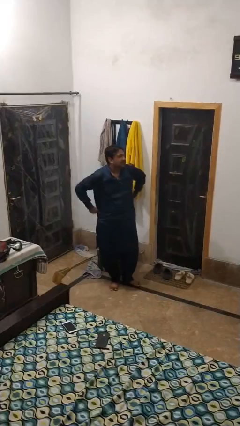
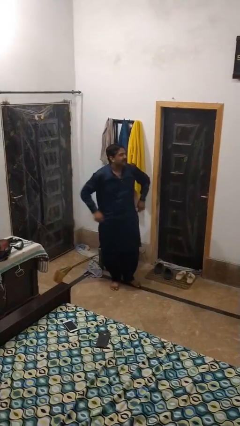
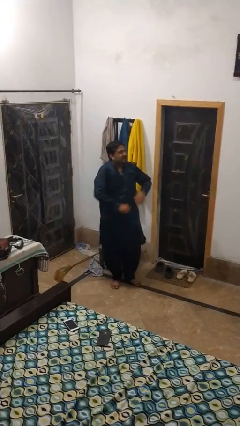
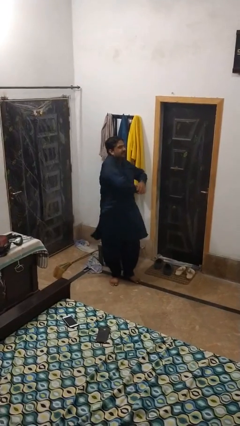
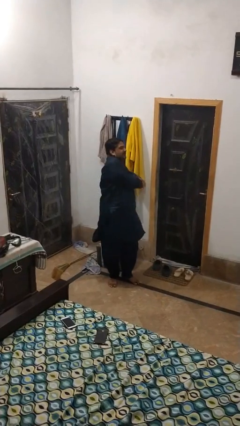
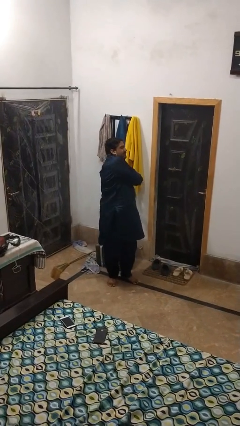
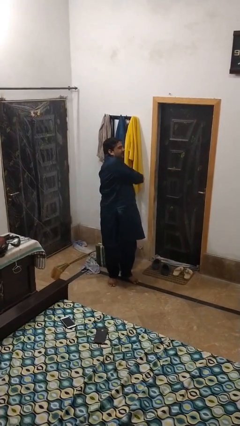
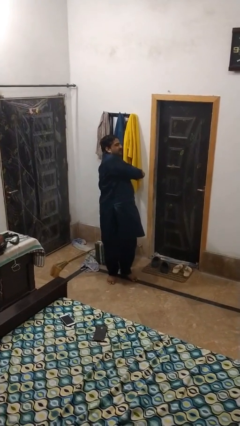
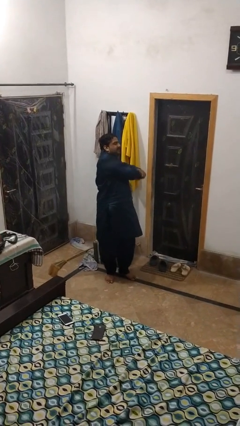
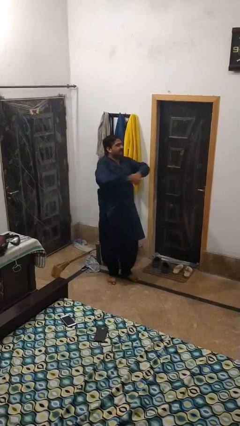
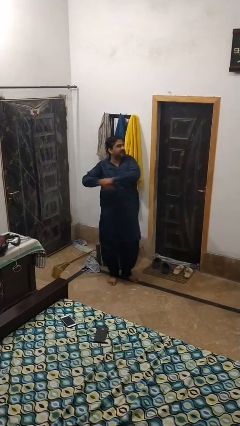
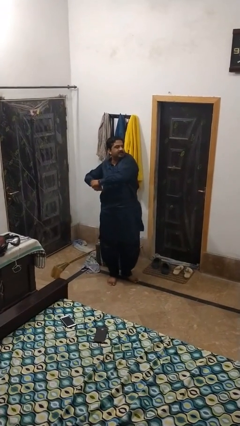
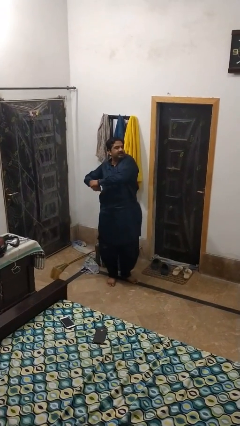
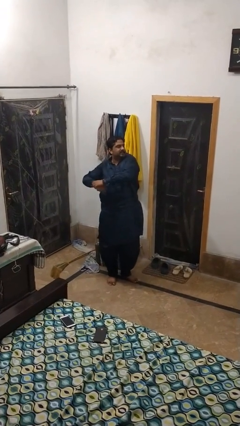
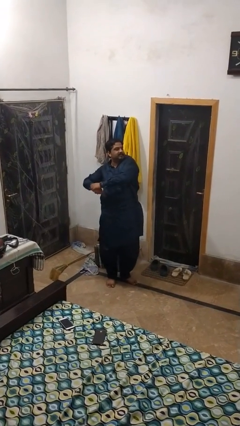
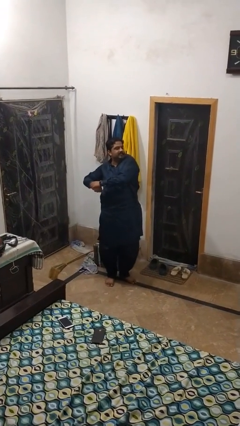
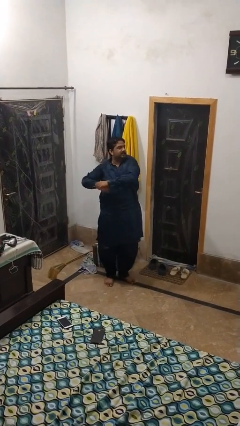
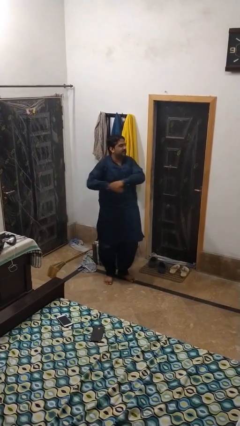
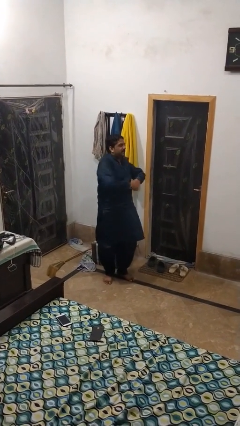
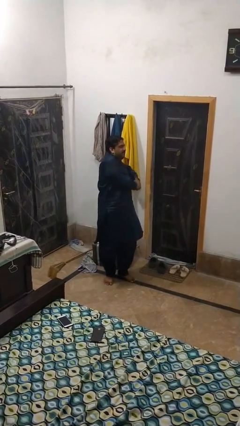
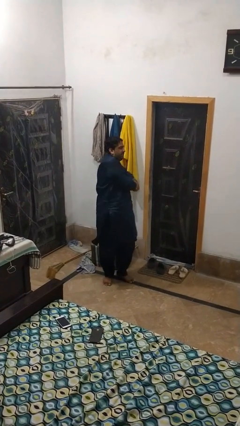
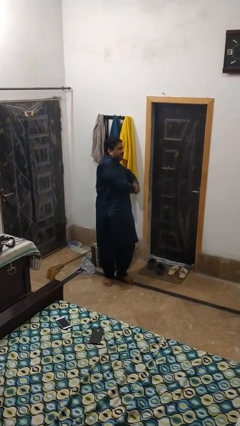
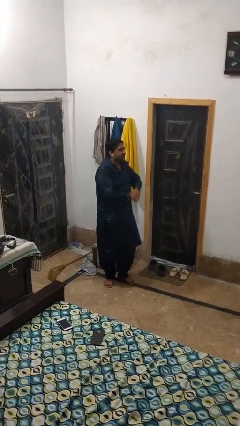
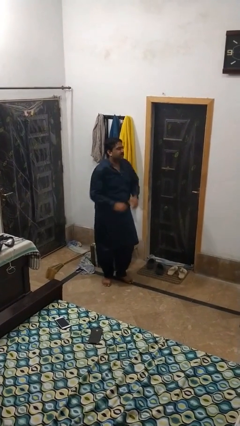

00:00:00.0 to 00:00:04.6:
person stretches arms to side

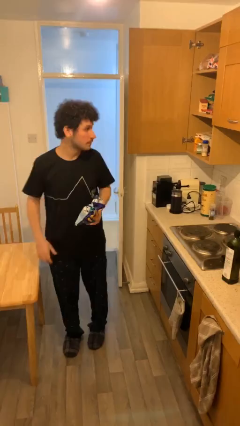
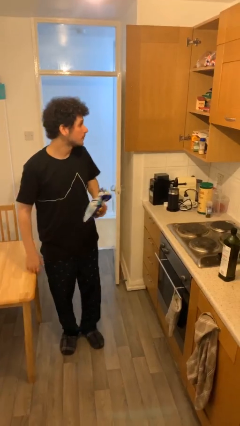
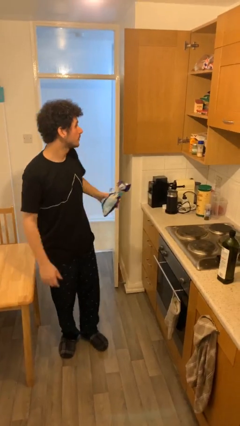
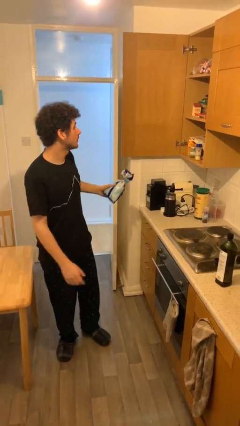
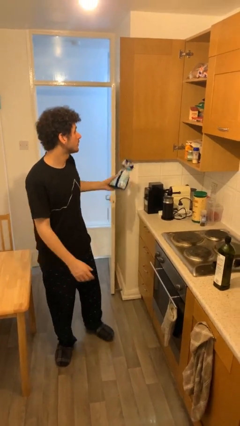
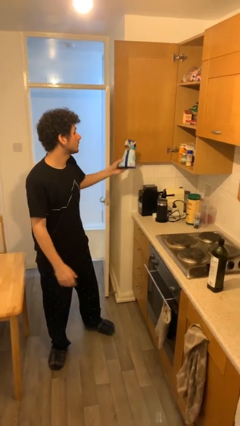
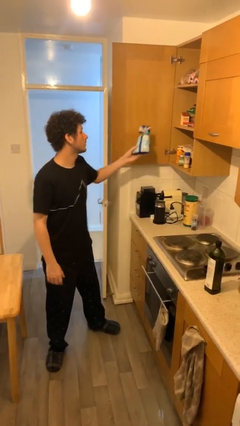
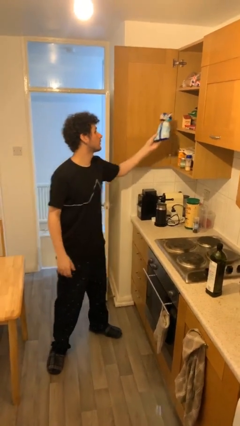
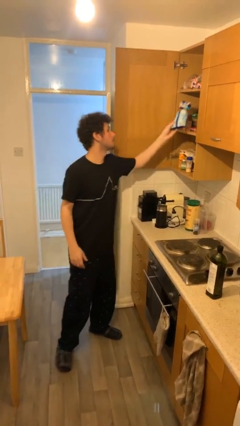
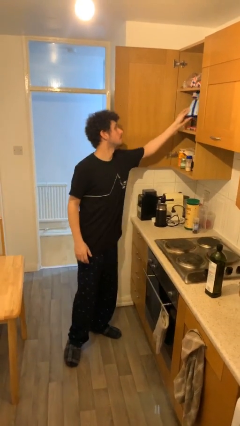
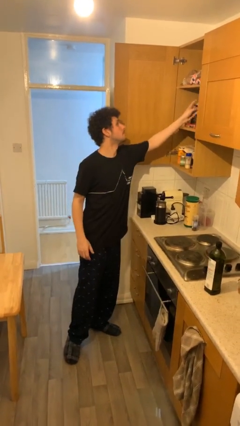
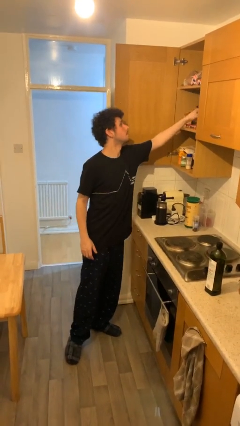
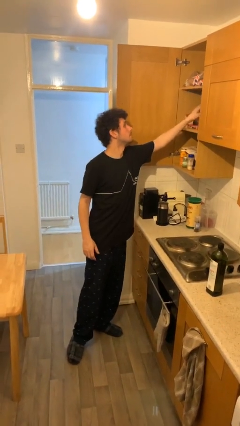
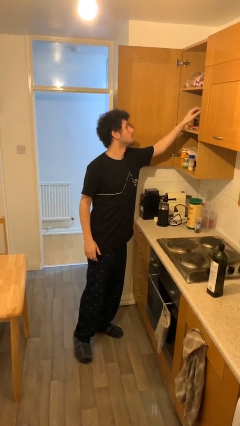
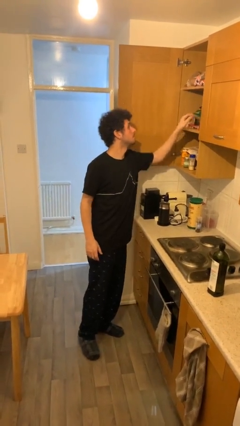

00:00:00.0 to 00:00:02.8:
person puts down object on shelf

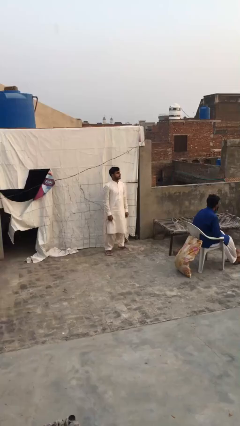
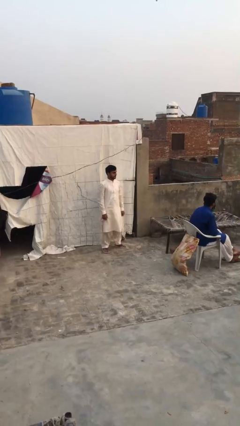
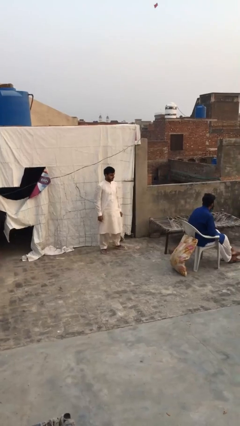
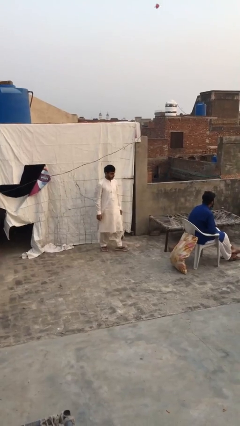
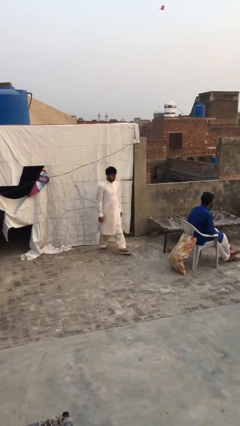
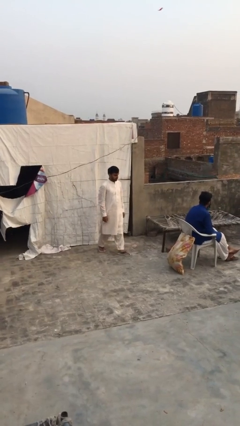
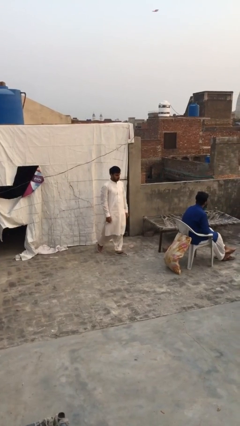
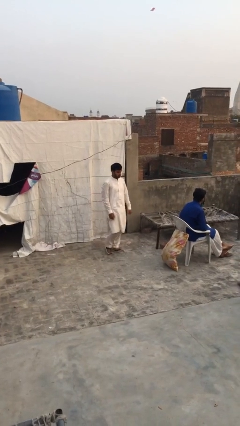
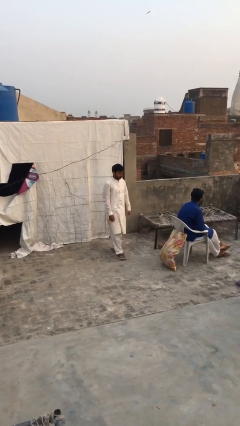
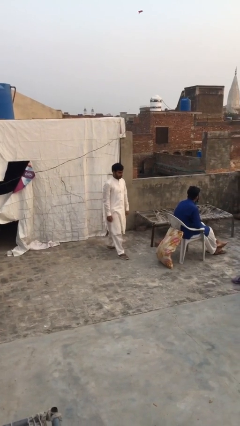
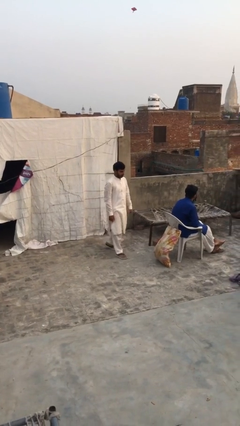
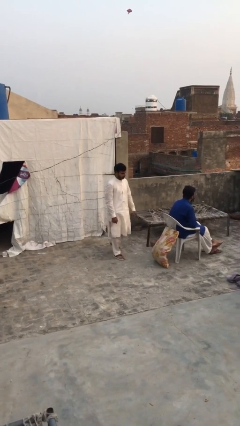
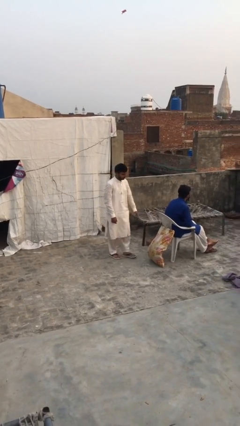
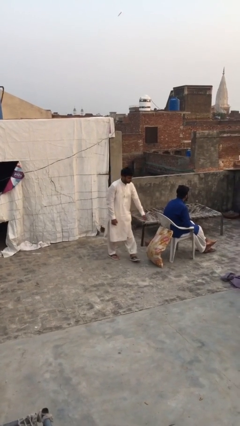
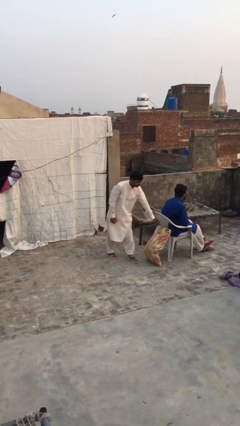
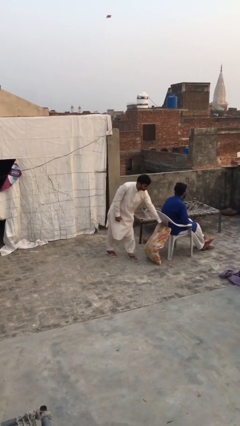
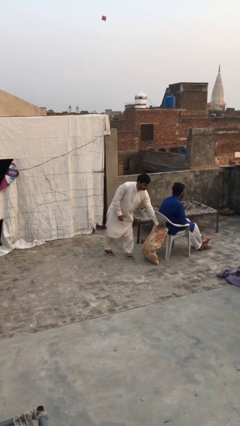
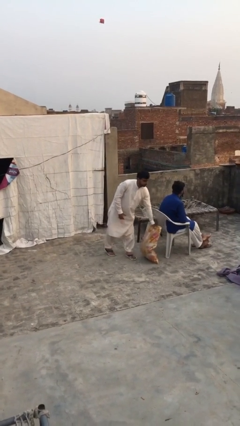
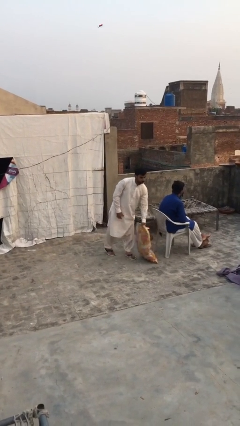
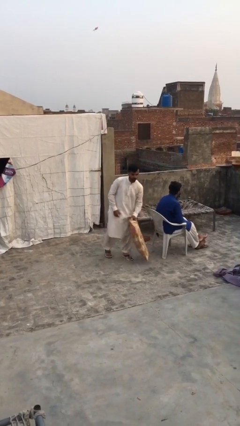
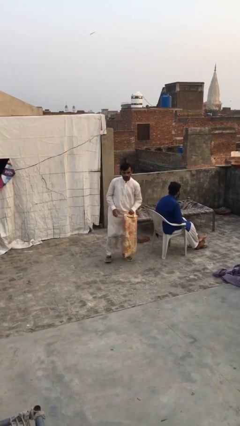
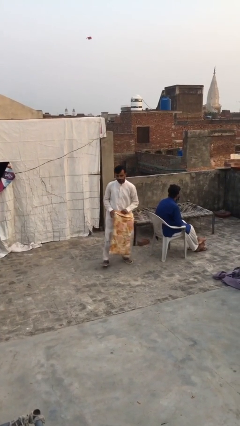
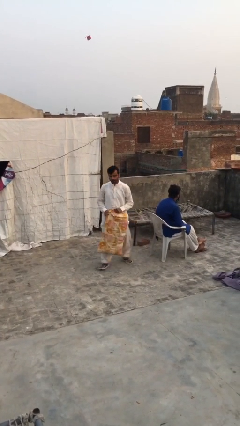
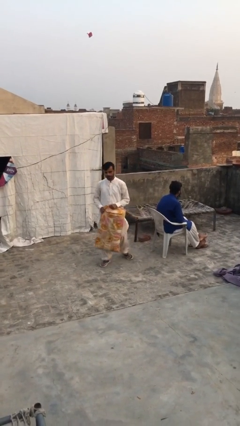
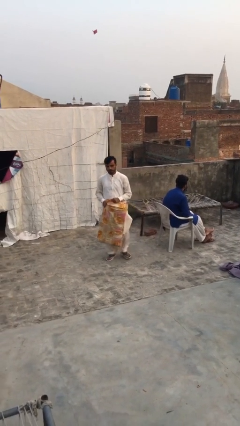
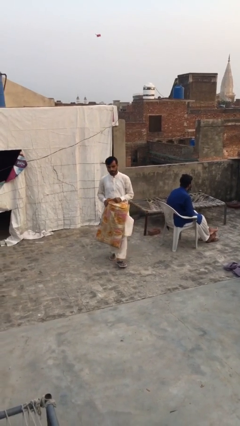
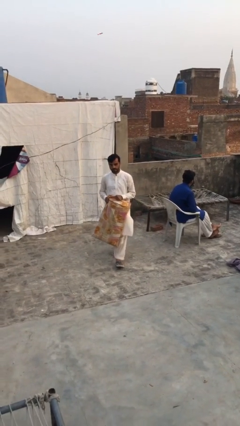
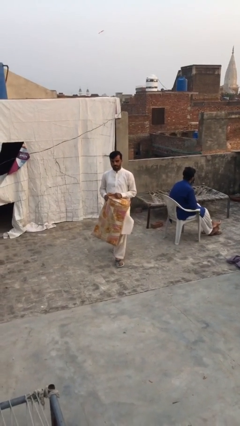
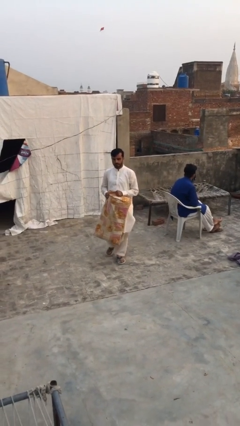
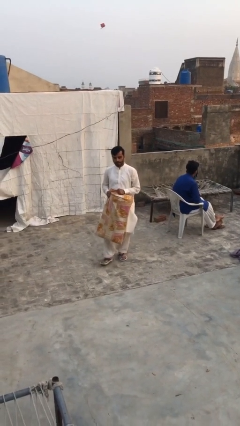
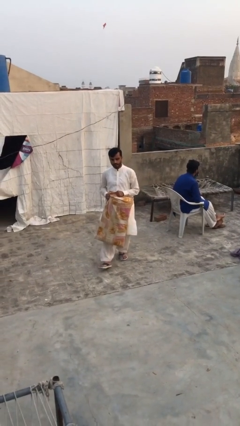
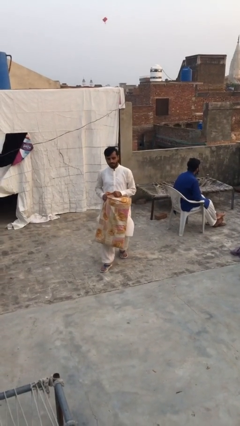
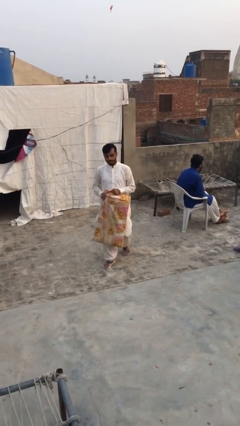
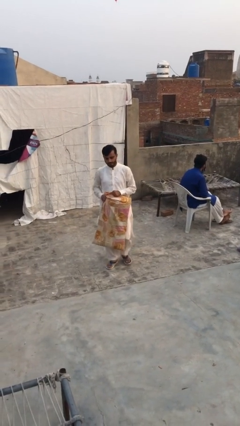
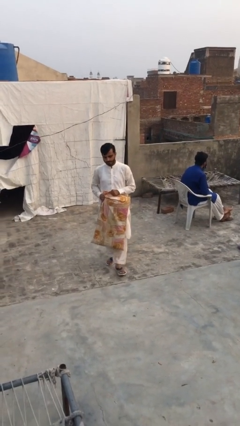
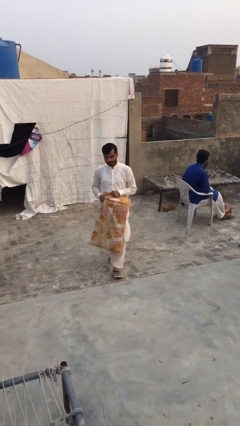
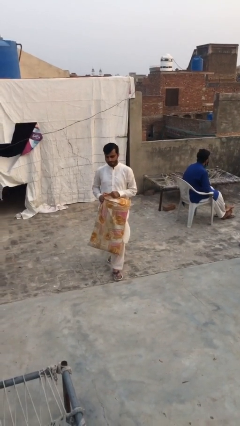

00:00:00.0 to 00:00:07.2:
person steals object from person

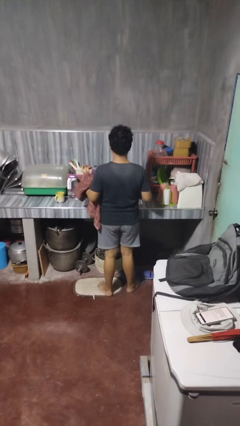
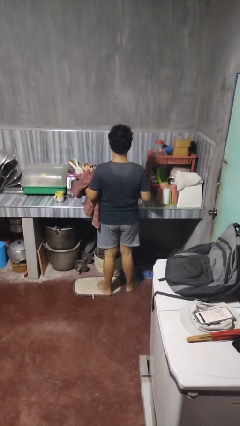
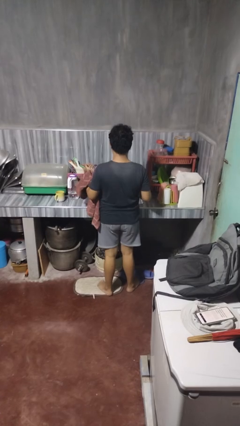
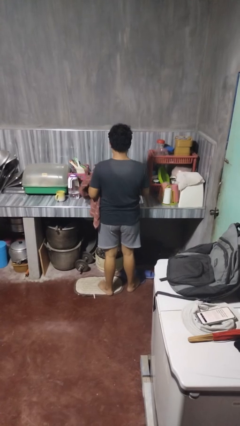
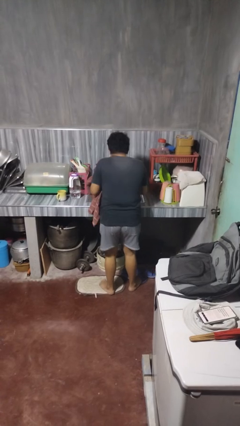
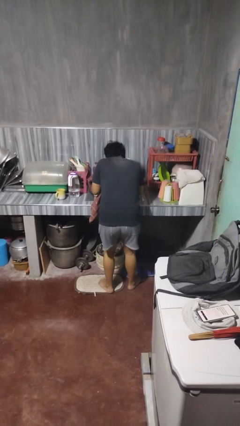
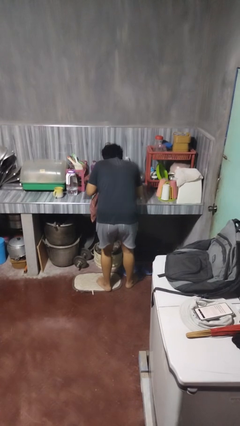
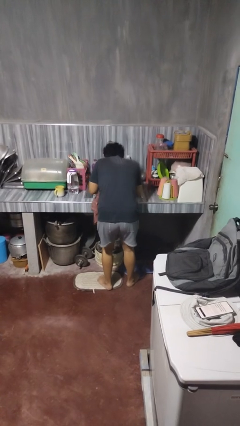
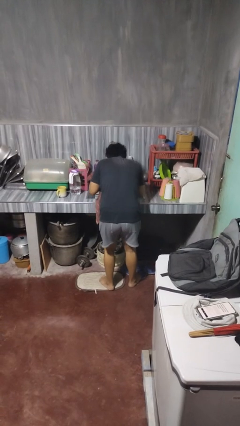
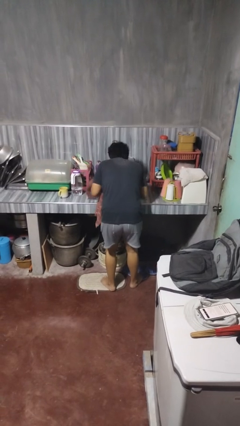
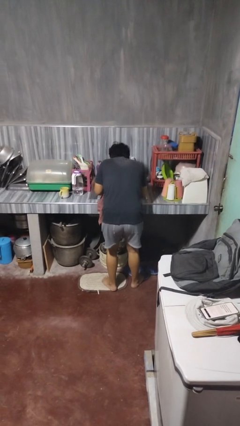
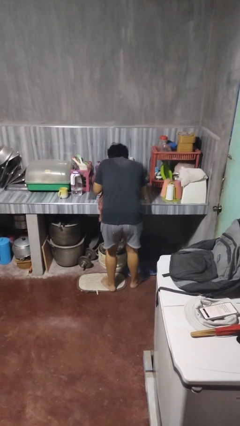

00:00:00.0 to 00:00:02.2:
person washes face

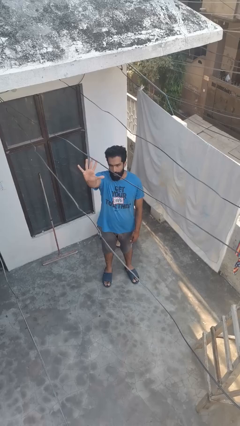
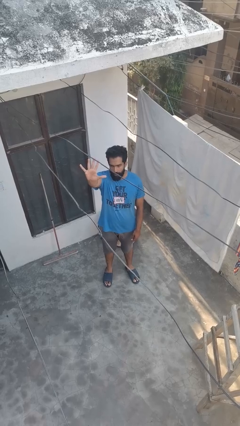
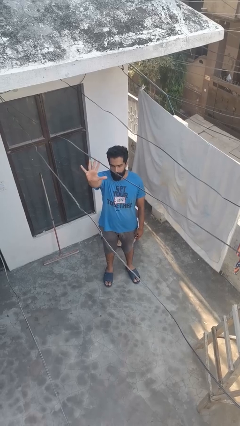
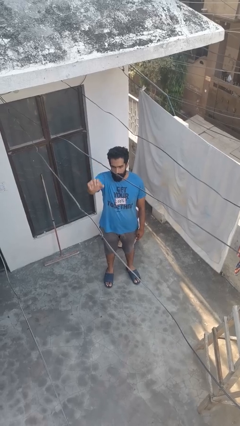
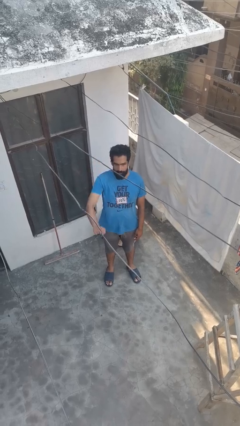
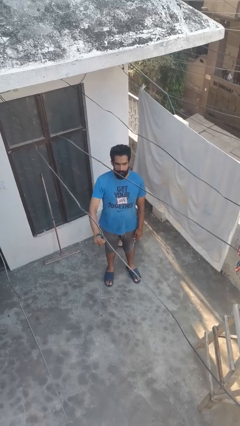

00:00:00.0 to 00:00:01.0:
person gestures number five
